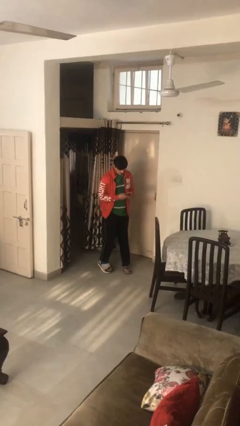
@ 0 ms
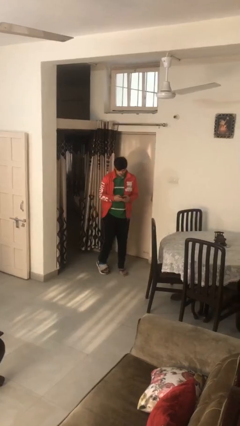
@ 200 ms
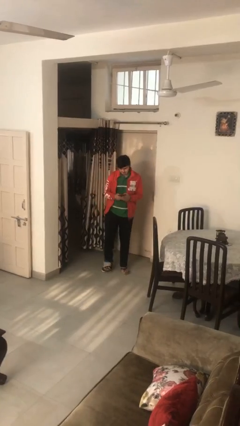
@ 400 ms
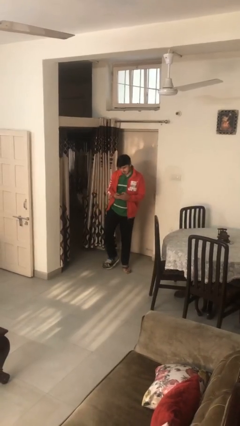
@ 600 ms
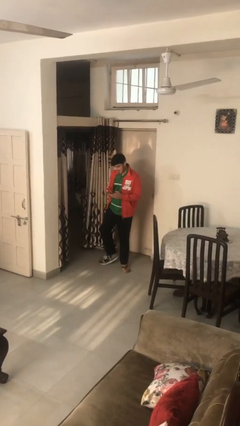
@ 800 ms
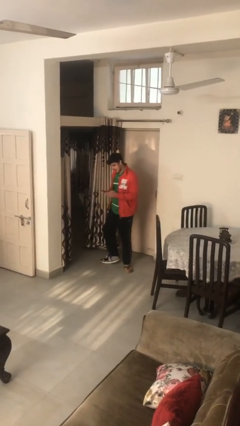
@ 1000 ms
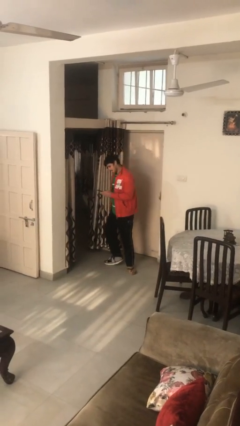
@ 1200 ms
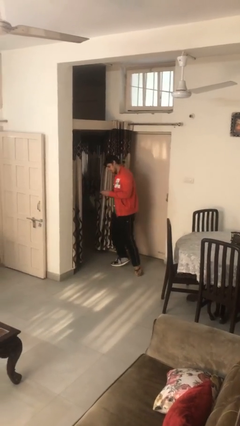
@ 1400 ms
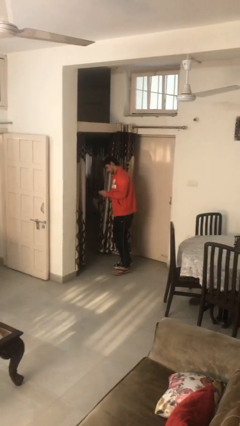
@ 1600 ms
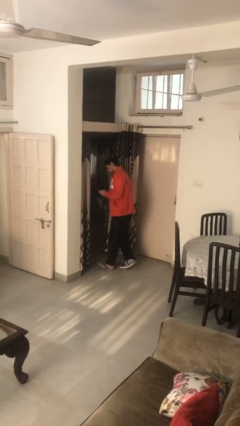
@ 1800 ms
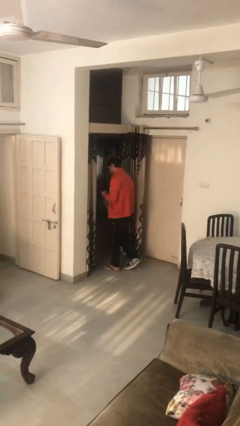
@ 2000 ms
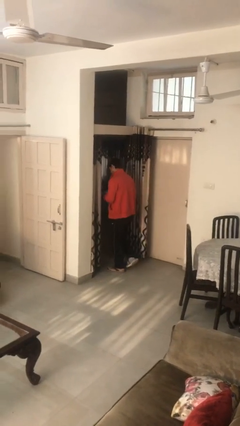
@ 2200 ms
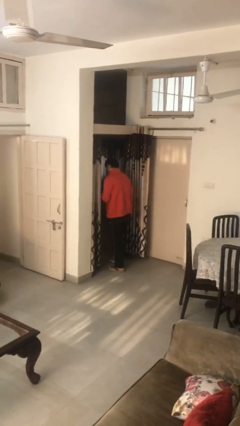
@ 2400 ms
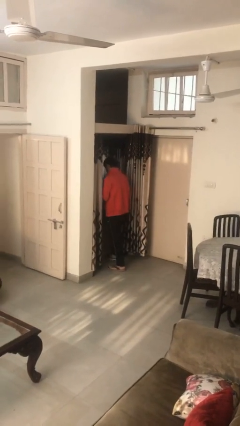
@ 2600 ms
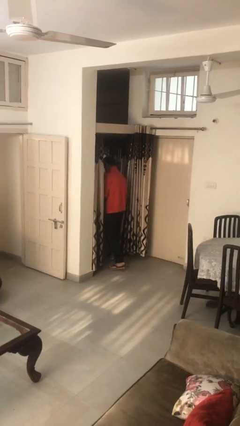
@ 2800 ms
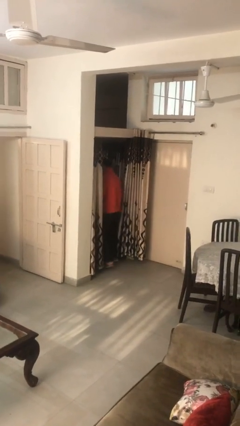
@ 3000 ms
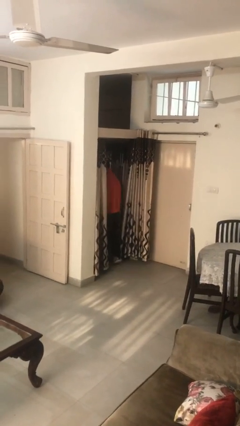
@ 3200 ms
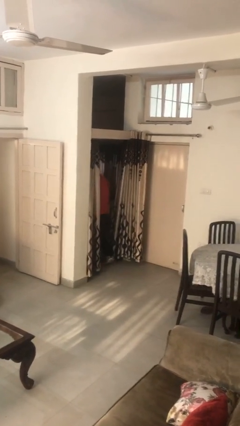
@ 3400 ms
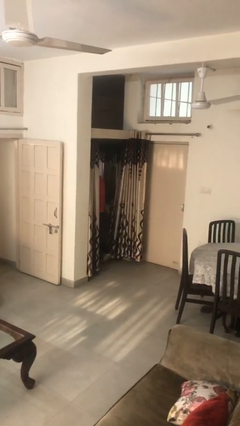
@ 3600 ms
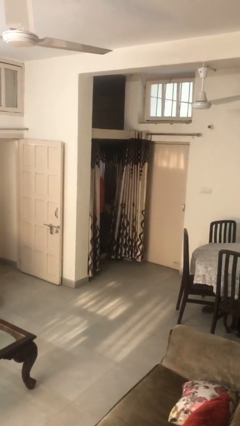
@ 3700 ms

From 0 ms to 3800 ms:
person exits scene through structure

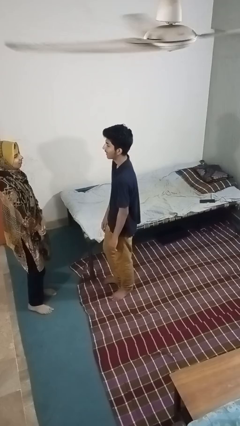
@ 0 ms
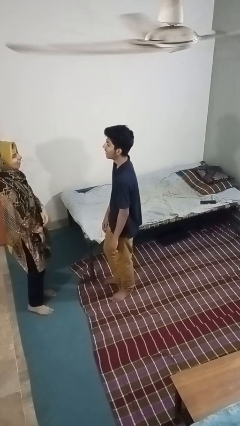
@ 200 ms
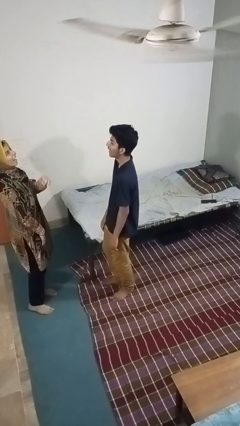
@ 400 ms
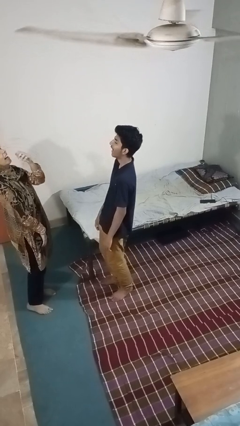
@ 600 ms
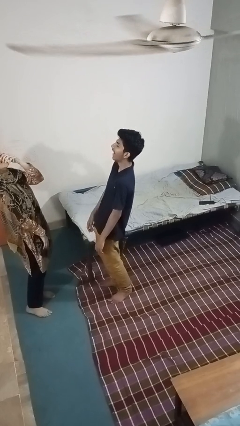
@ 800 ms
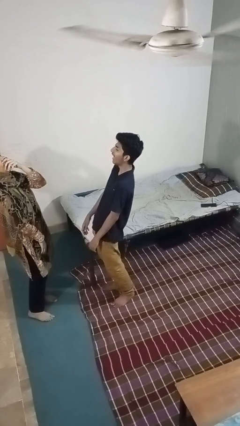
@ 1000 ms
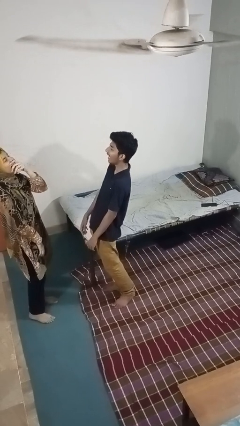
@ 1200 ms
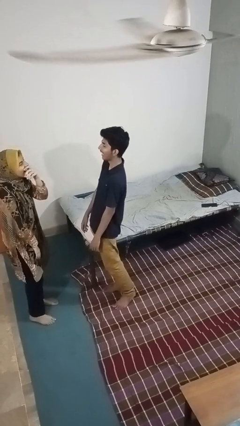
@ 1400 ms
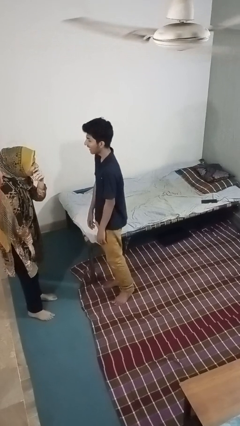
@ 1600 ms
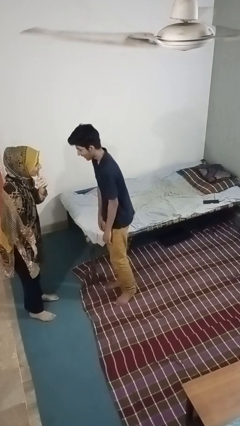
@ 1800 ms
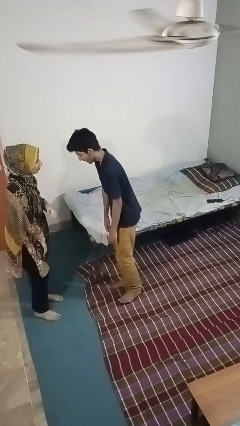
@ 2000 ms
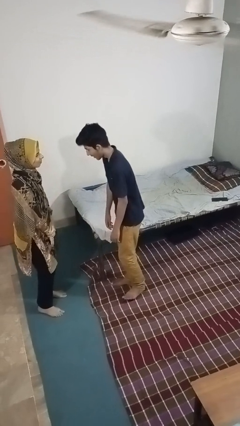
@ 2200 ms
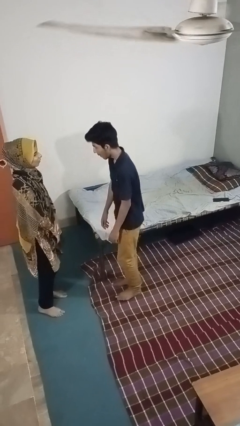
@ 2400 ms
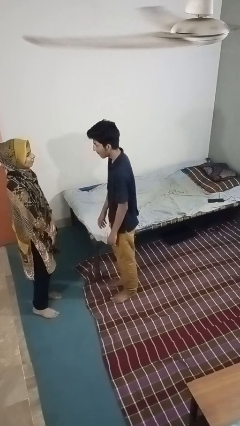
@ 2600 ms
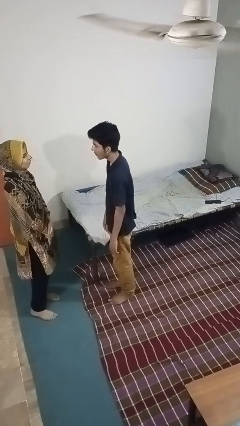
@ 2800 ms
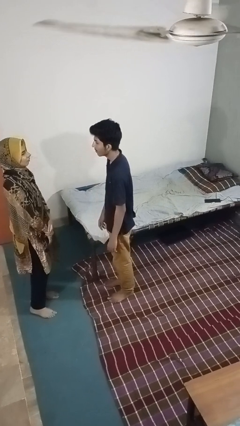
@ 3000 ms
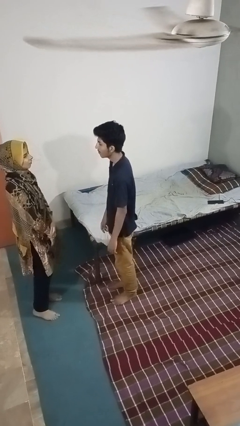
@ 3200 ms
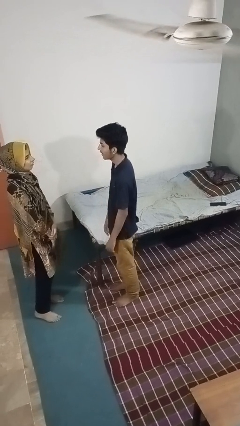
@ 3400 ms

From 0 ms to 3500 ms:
person laughs with person

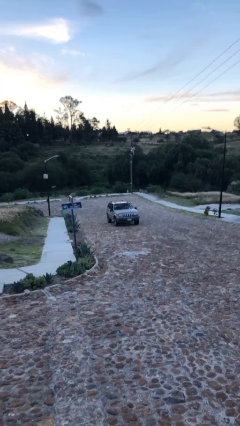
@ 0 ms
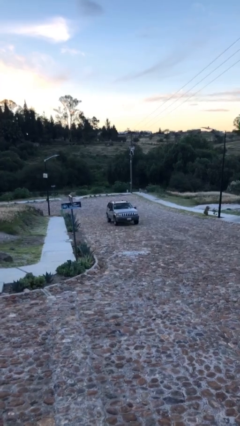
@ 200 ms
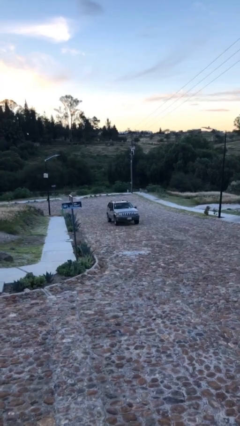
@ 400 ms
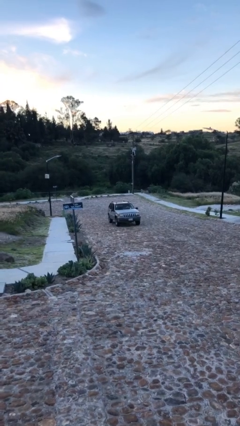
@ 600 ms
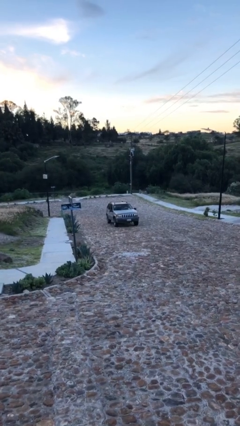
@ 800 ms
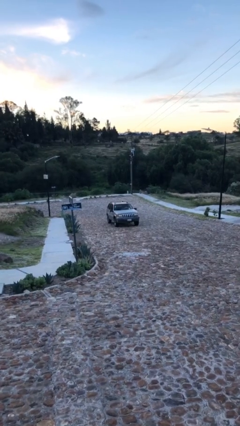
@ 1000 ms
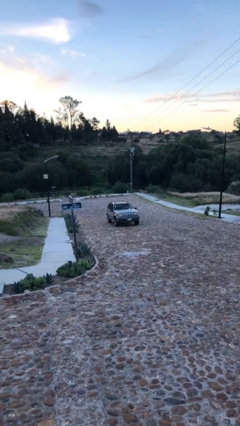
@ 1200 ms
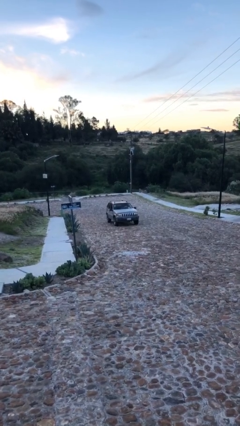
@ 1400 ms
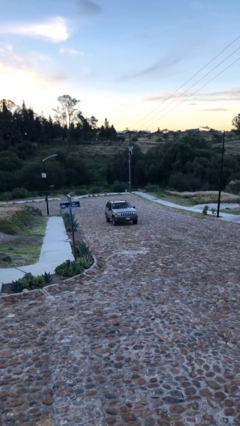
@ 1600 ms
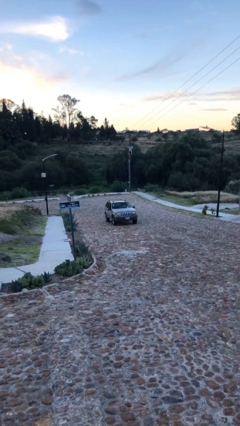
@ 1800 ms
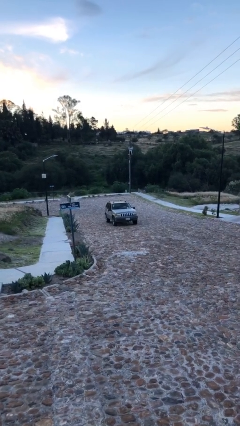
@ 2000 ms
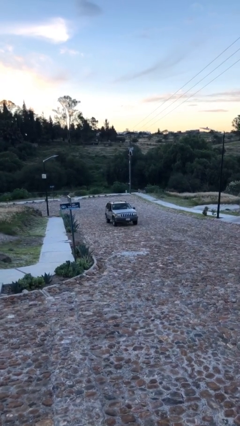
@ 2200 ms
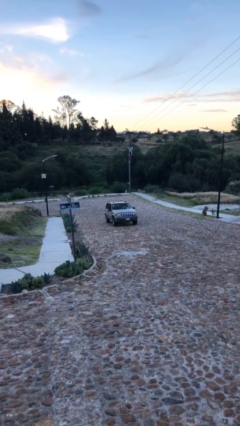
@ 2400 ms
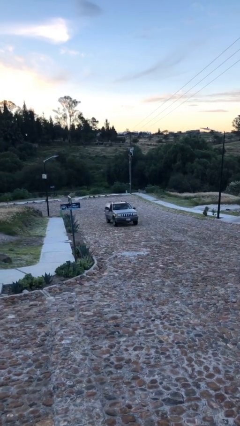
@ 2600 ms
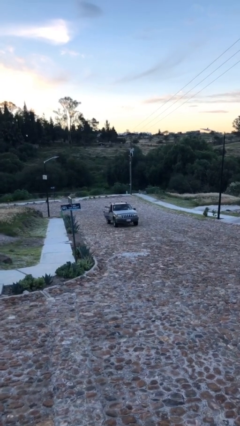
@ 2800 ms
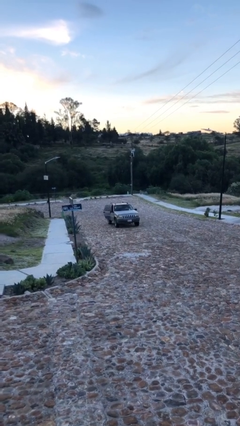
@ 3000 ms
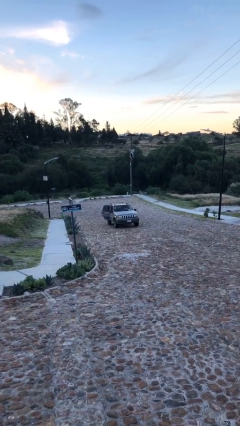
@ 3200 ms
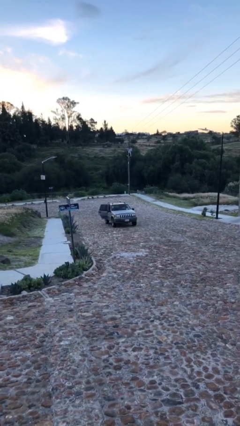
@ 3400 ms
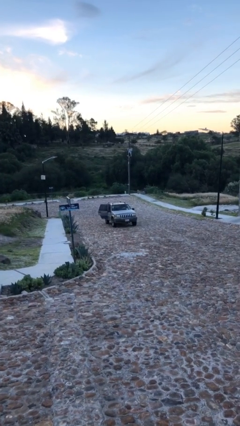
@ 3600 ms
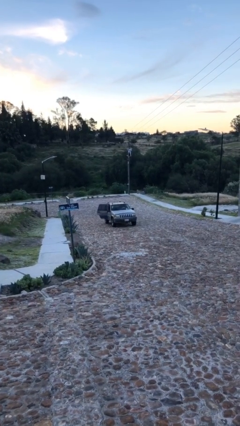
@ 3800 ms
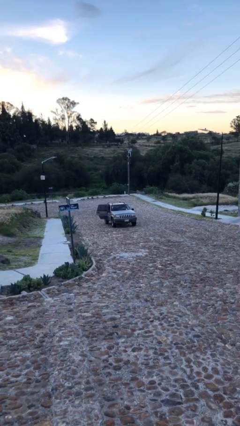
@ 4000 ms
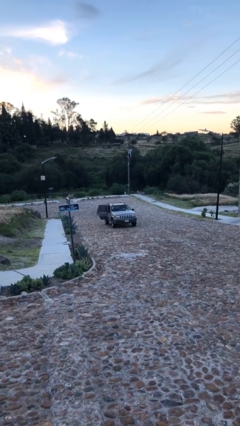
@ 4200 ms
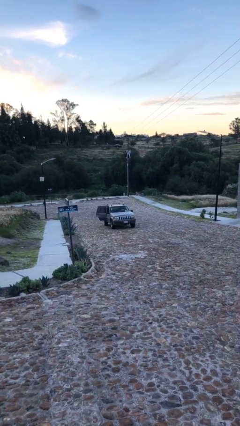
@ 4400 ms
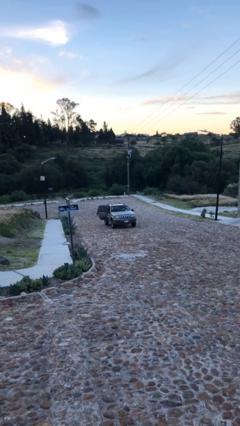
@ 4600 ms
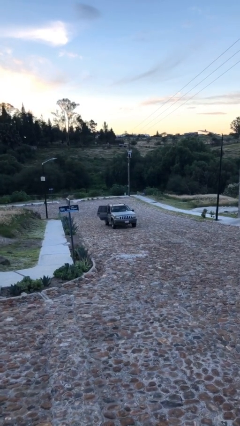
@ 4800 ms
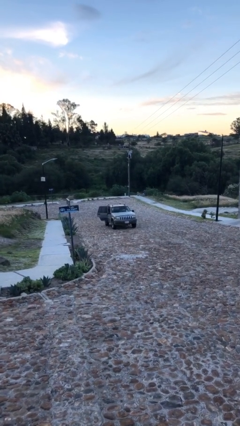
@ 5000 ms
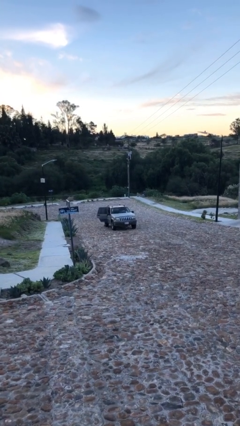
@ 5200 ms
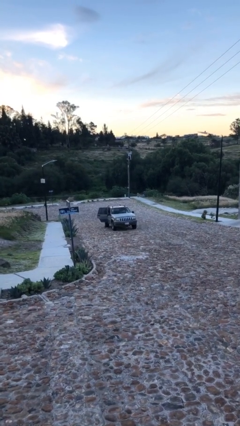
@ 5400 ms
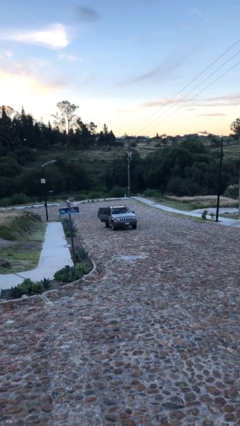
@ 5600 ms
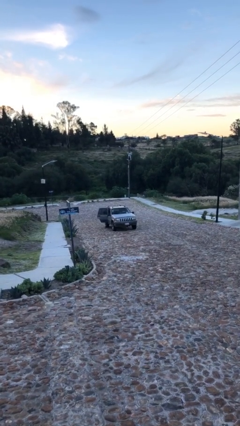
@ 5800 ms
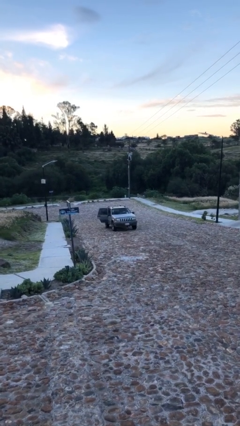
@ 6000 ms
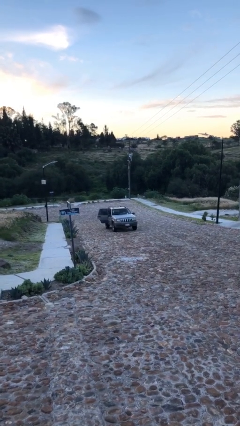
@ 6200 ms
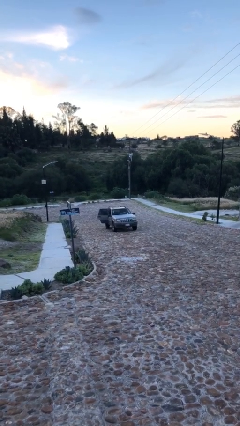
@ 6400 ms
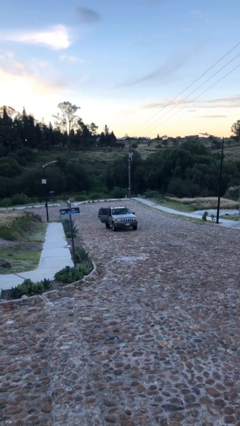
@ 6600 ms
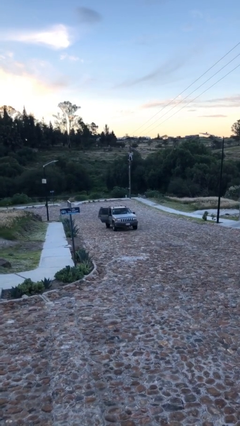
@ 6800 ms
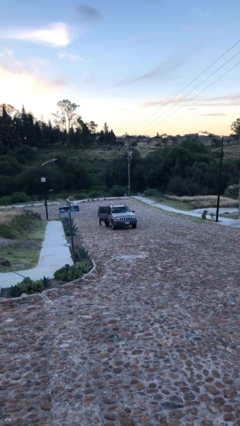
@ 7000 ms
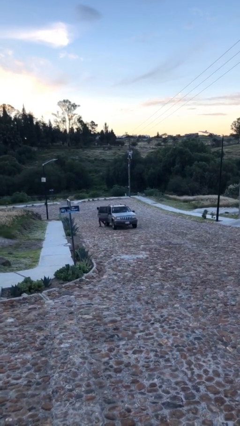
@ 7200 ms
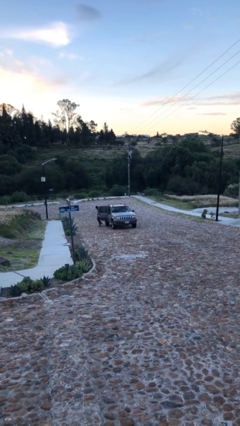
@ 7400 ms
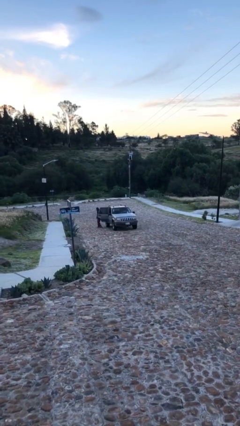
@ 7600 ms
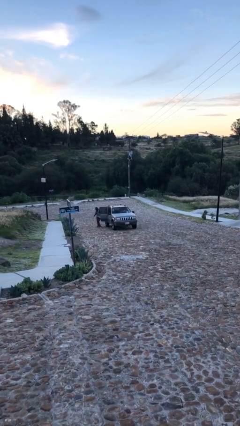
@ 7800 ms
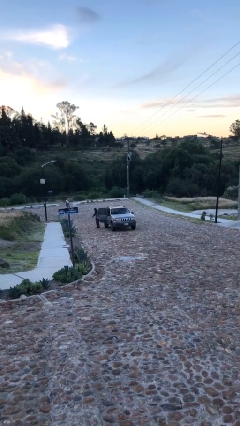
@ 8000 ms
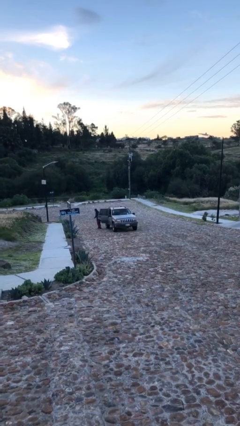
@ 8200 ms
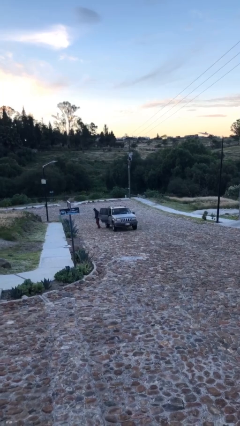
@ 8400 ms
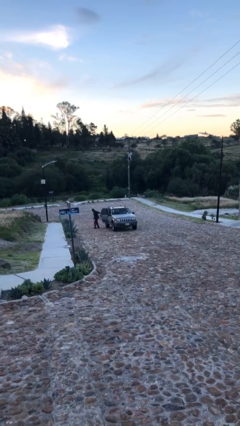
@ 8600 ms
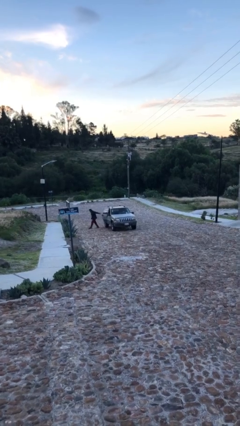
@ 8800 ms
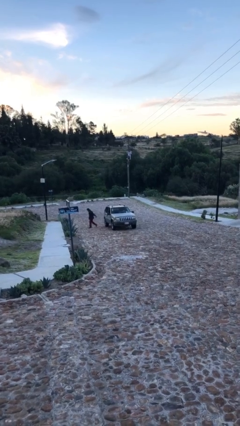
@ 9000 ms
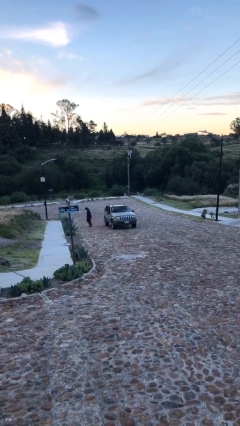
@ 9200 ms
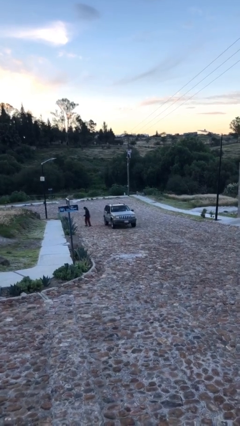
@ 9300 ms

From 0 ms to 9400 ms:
car drops off person

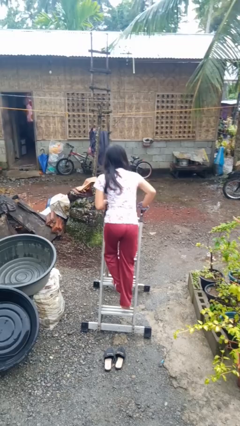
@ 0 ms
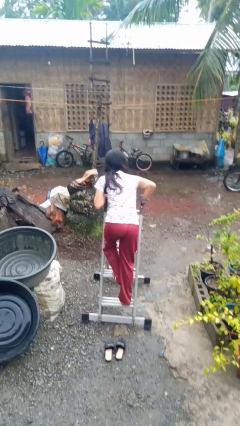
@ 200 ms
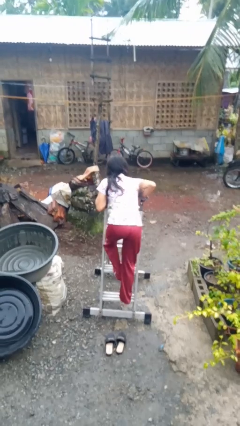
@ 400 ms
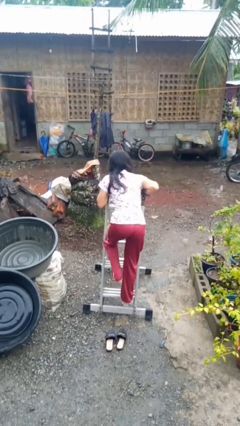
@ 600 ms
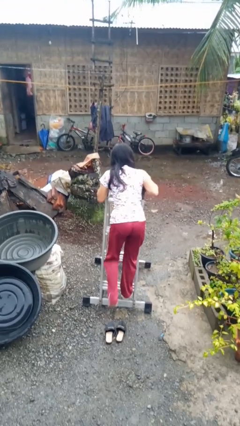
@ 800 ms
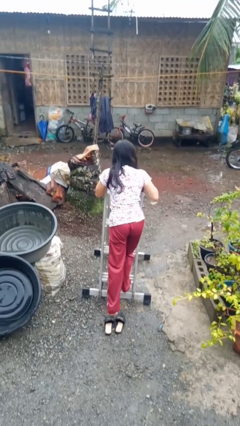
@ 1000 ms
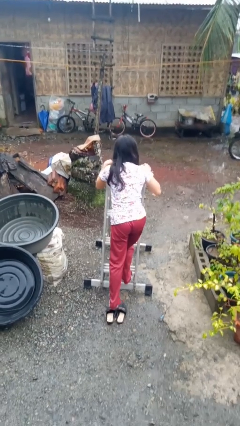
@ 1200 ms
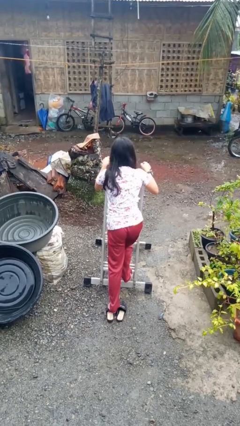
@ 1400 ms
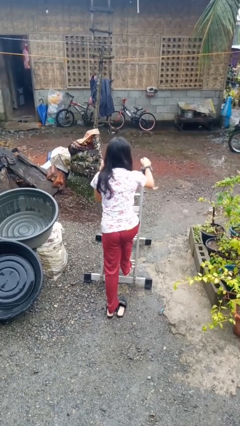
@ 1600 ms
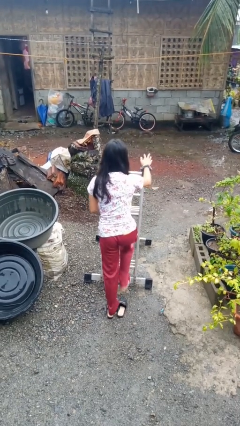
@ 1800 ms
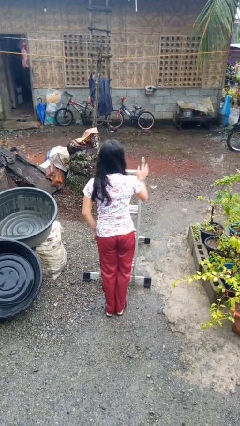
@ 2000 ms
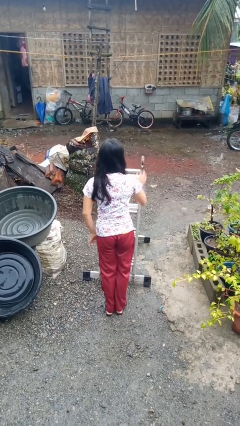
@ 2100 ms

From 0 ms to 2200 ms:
person climbs down ladder